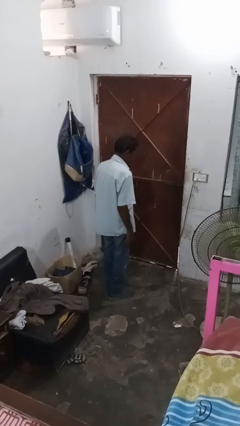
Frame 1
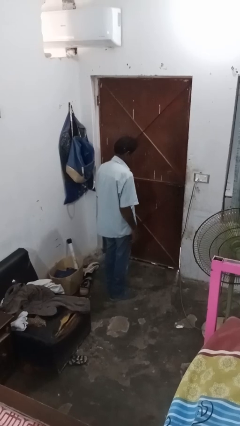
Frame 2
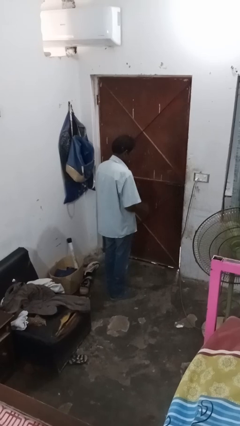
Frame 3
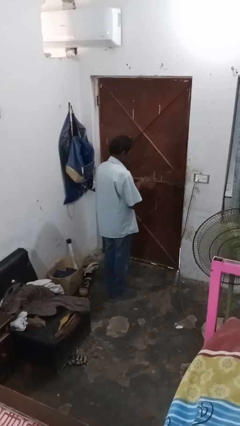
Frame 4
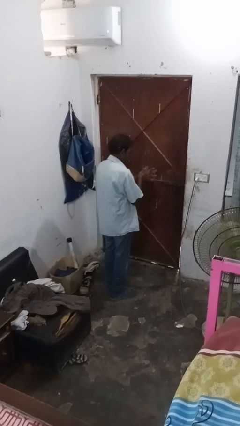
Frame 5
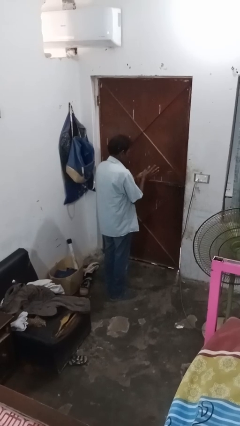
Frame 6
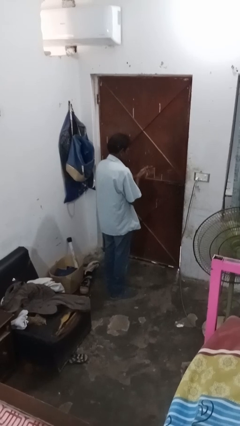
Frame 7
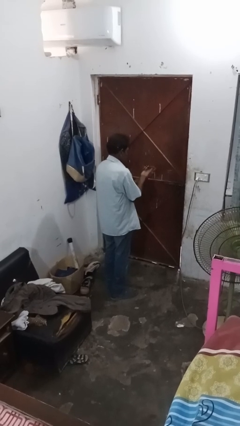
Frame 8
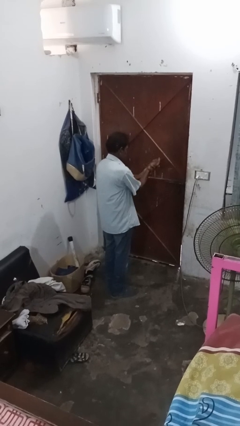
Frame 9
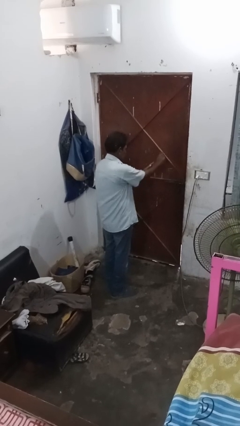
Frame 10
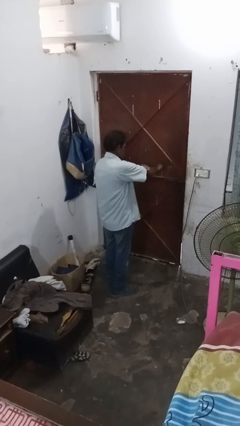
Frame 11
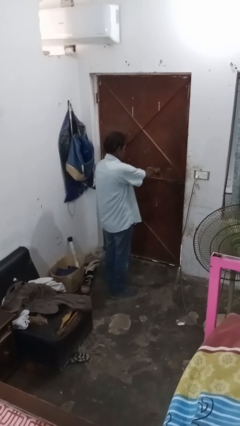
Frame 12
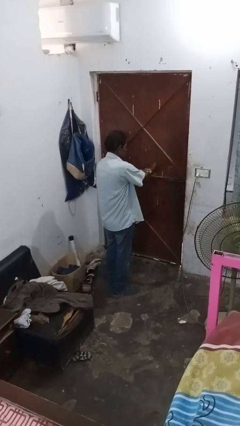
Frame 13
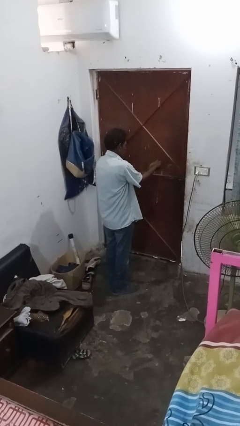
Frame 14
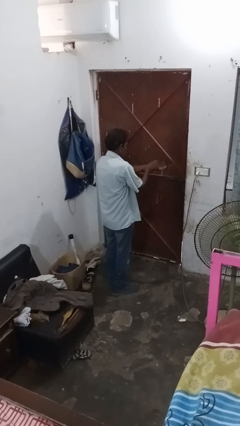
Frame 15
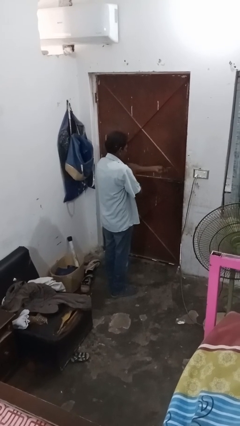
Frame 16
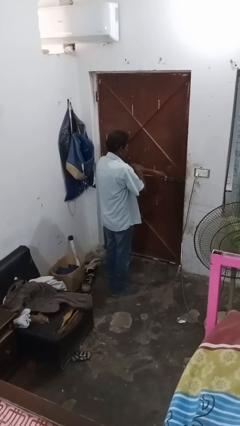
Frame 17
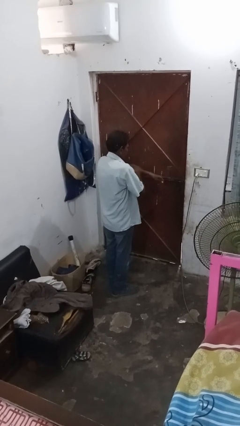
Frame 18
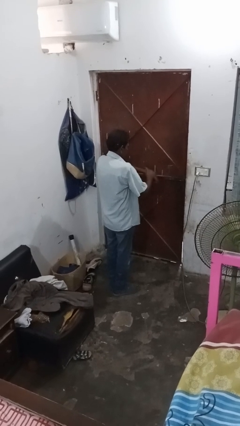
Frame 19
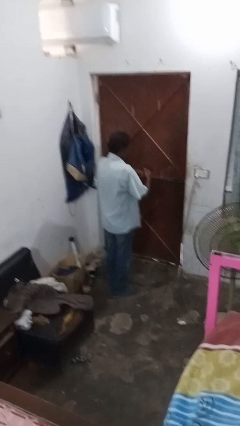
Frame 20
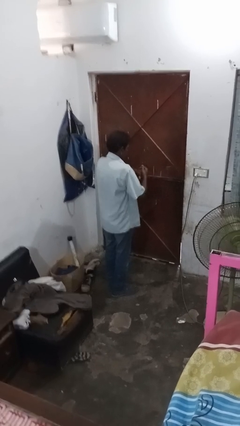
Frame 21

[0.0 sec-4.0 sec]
person applies sunscreen

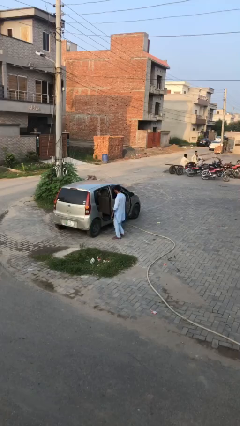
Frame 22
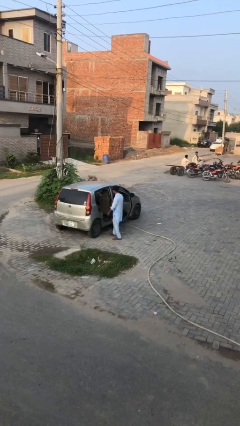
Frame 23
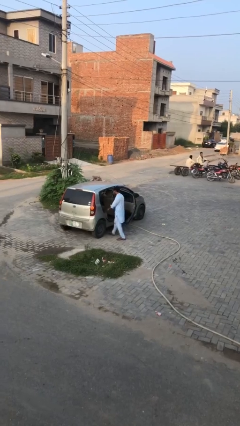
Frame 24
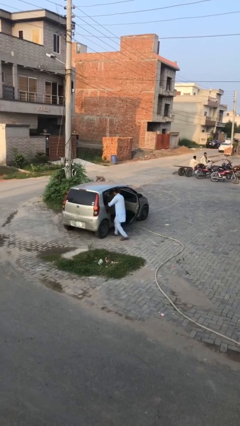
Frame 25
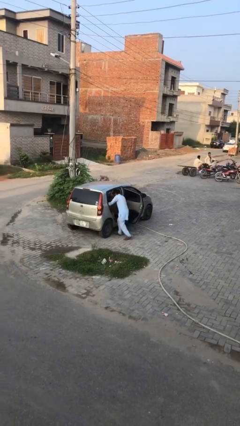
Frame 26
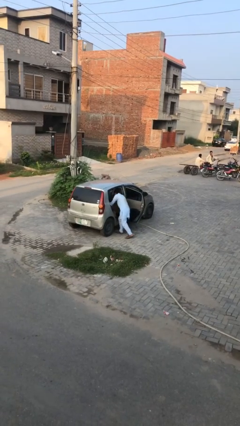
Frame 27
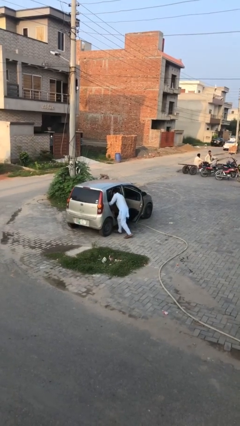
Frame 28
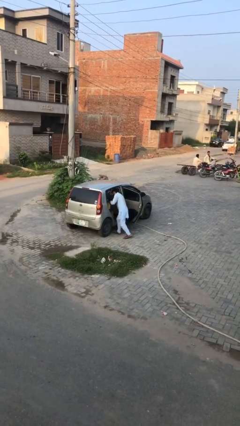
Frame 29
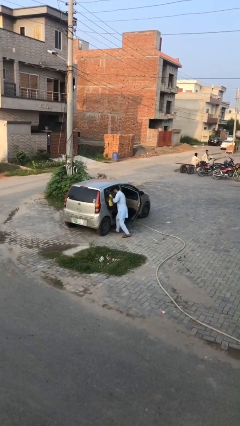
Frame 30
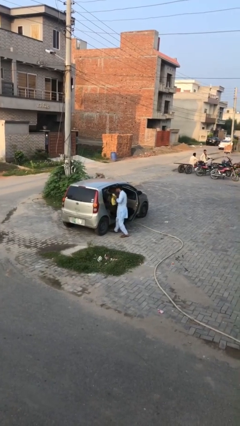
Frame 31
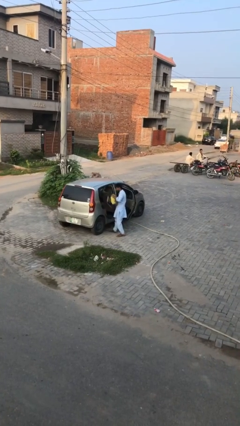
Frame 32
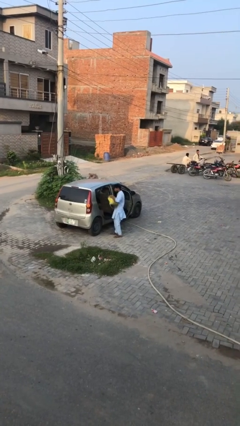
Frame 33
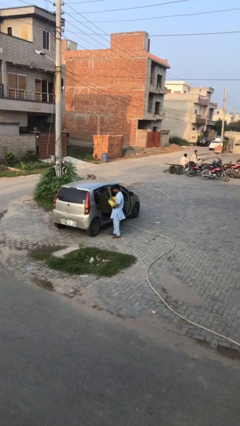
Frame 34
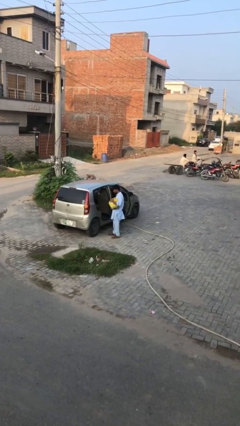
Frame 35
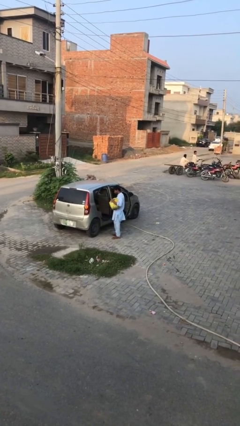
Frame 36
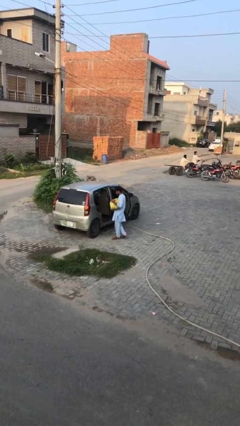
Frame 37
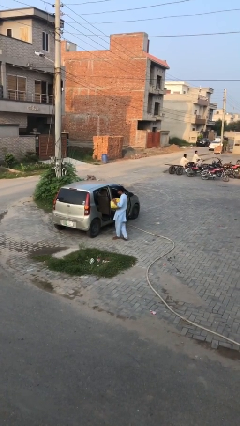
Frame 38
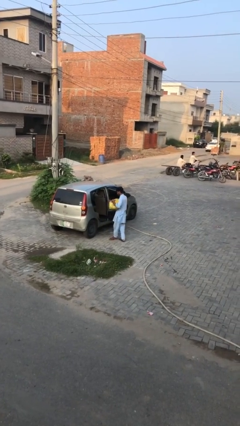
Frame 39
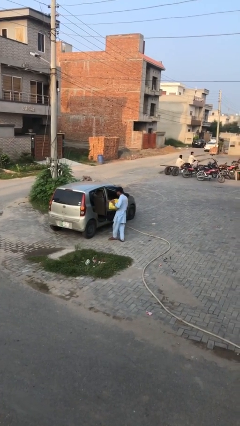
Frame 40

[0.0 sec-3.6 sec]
person unloads car

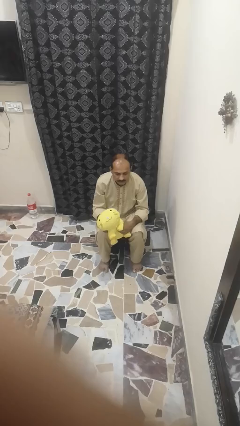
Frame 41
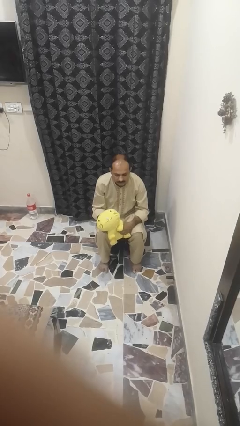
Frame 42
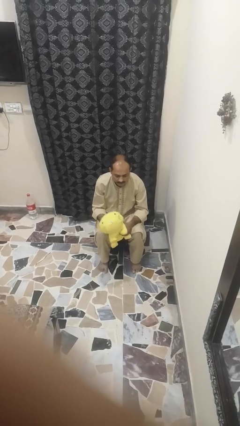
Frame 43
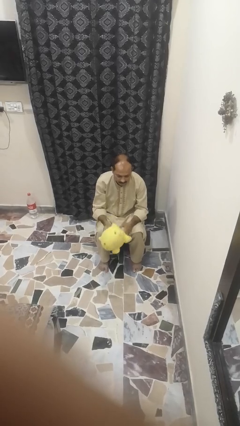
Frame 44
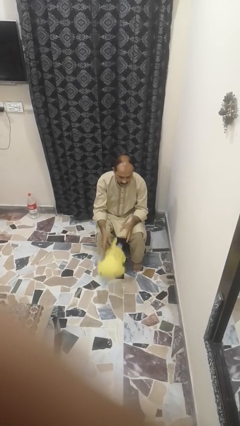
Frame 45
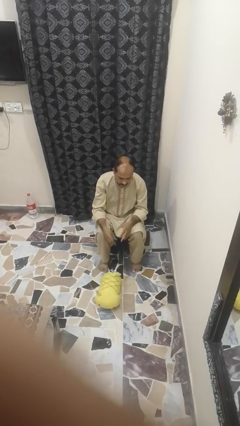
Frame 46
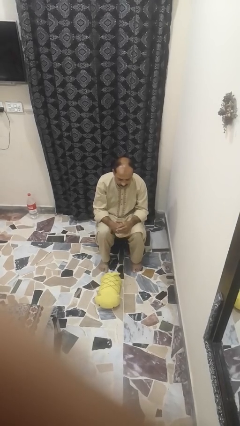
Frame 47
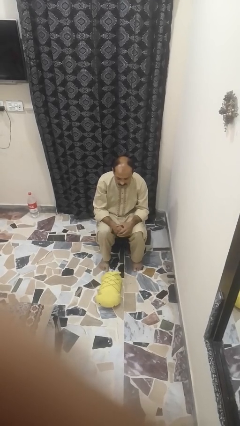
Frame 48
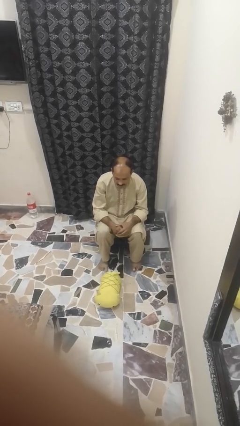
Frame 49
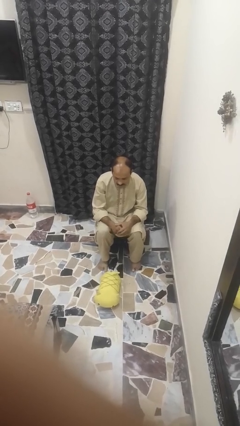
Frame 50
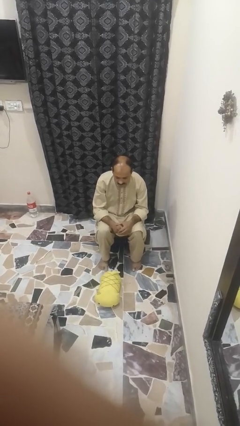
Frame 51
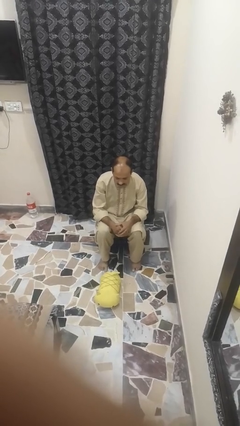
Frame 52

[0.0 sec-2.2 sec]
person drops object

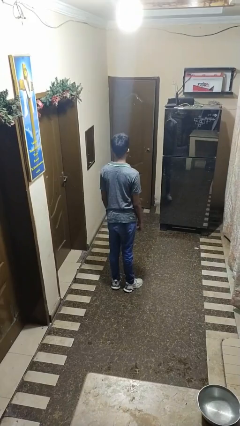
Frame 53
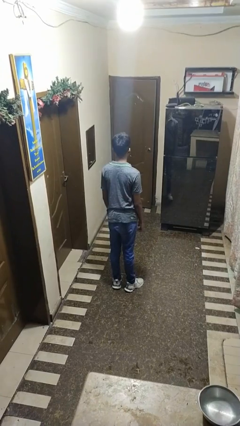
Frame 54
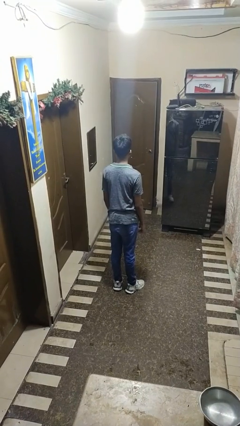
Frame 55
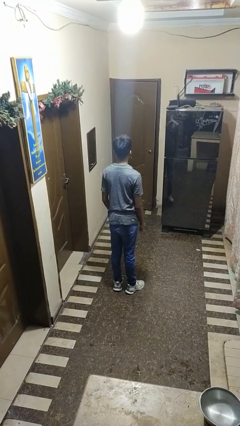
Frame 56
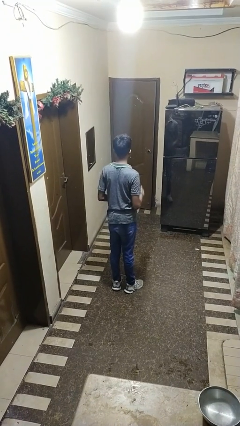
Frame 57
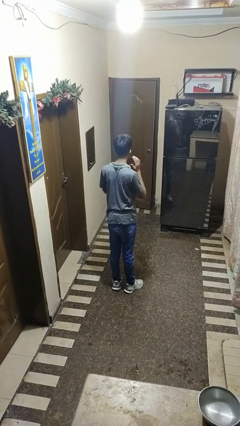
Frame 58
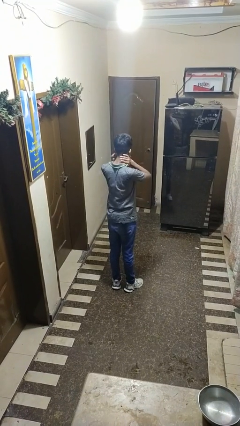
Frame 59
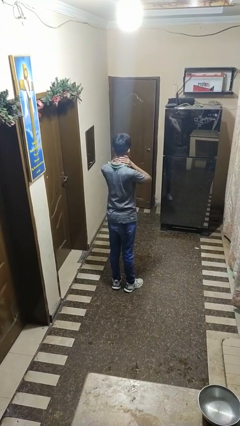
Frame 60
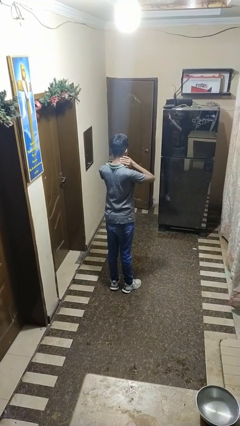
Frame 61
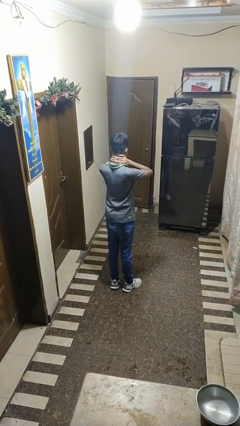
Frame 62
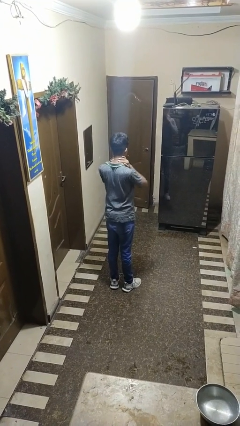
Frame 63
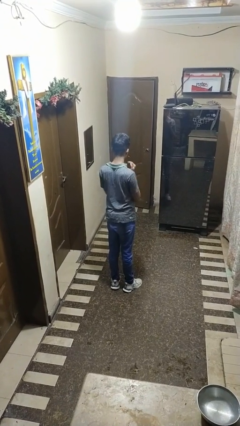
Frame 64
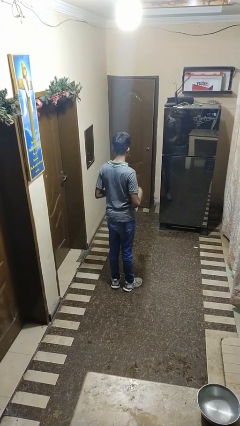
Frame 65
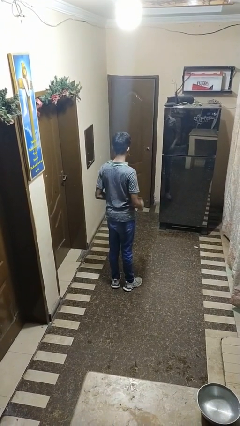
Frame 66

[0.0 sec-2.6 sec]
person rubs neck

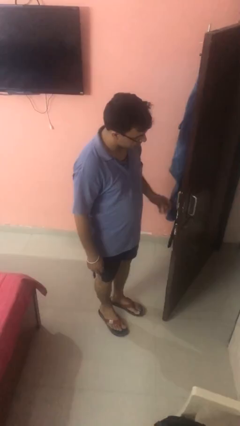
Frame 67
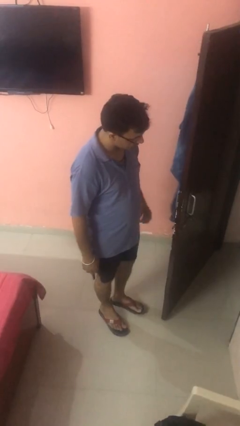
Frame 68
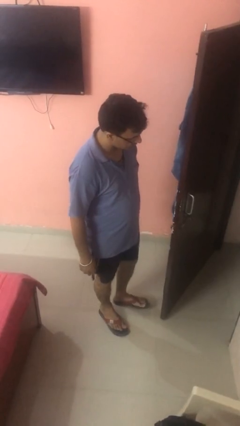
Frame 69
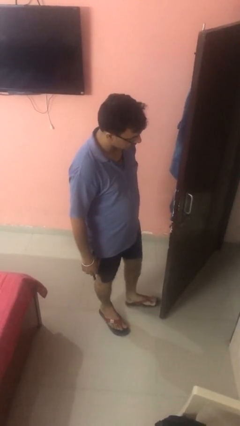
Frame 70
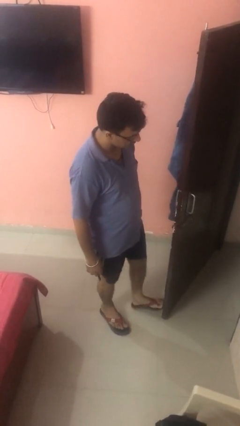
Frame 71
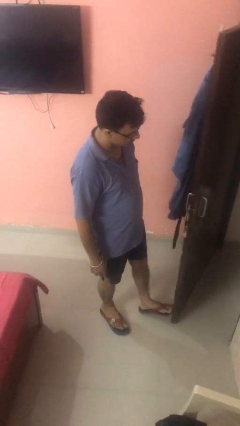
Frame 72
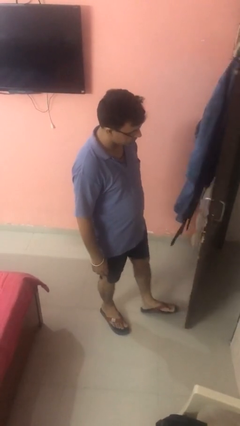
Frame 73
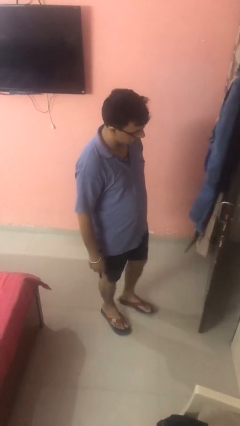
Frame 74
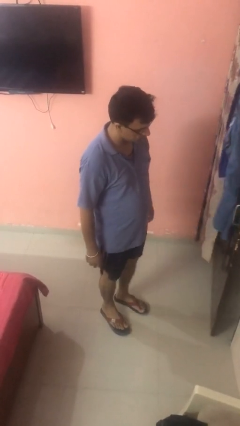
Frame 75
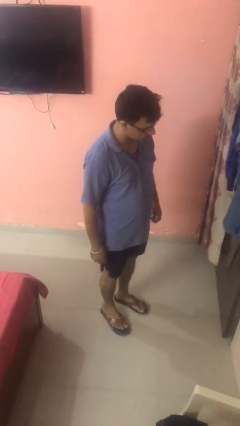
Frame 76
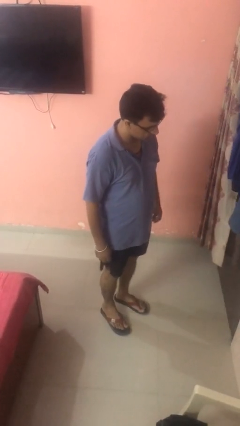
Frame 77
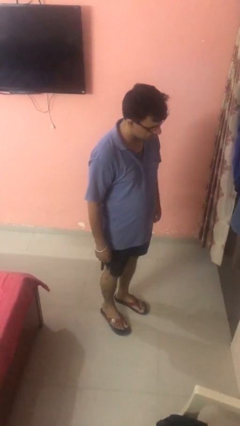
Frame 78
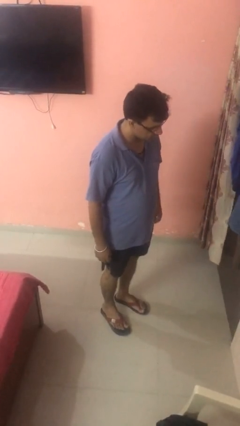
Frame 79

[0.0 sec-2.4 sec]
person closes door with foot

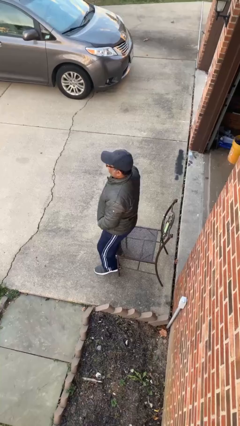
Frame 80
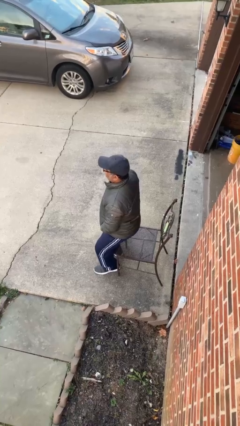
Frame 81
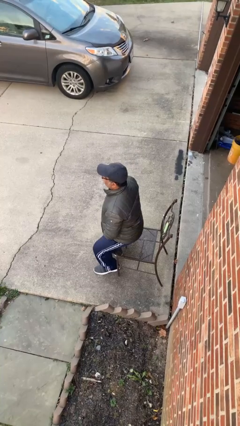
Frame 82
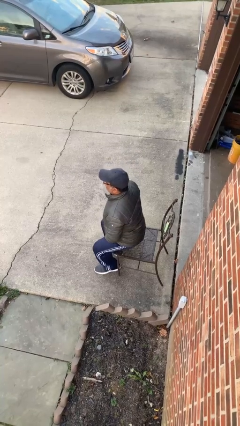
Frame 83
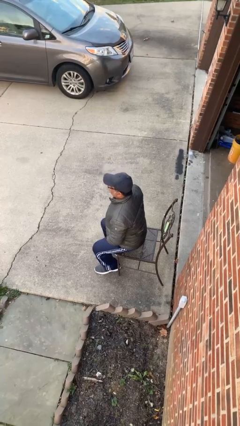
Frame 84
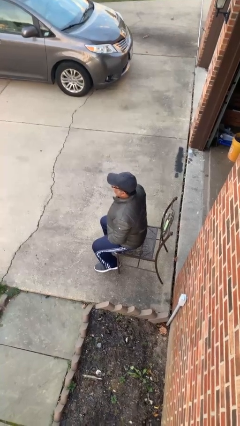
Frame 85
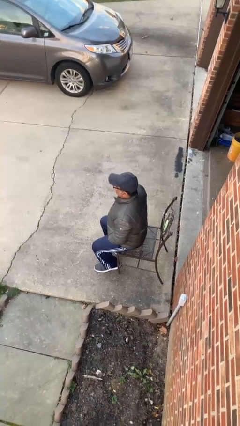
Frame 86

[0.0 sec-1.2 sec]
person sits down

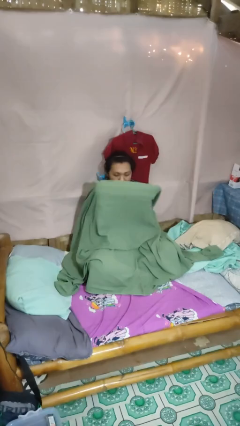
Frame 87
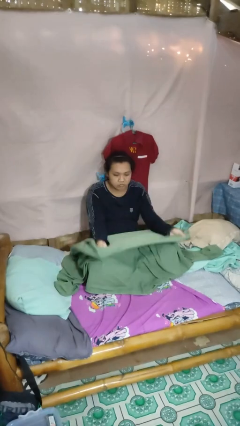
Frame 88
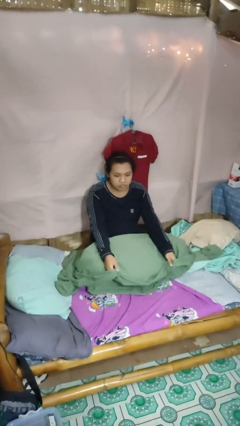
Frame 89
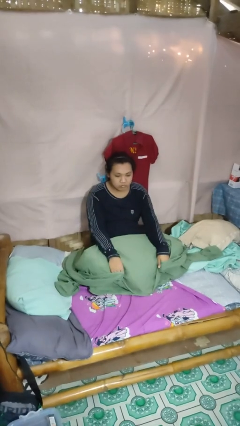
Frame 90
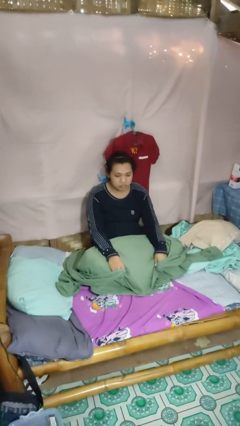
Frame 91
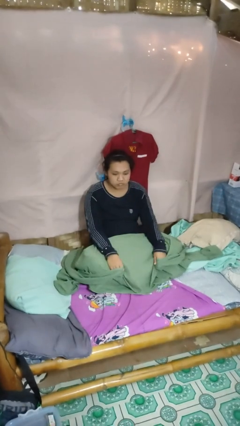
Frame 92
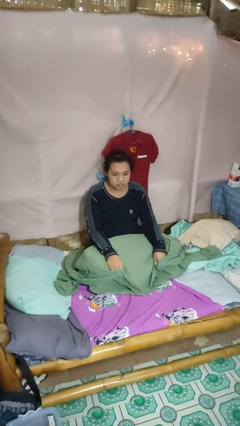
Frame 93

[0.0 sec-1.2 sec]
person uncovers with blanket
